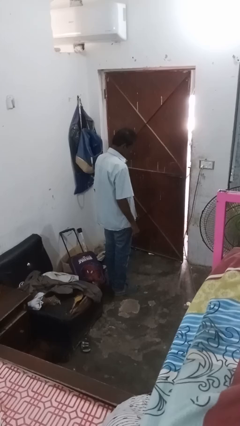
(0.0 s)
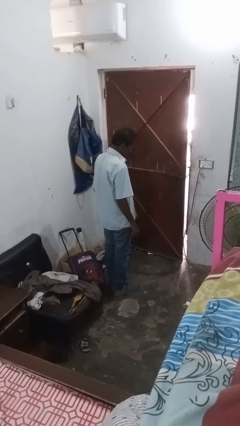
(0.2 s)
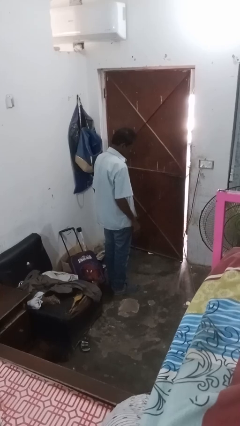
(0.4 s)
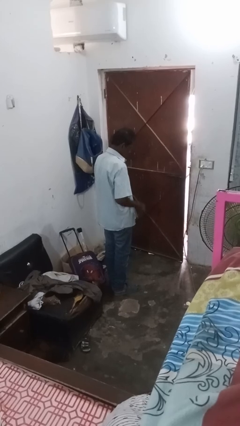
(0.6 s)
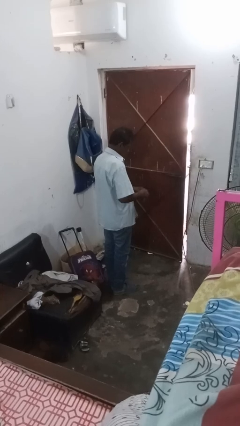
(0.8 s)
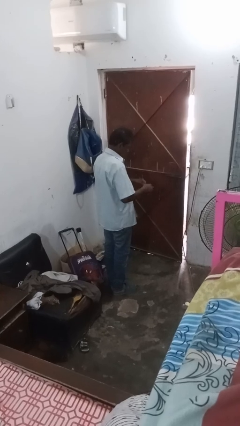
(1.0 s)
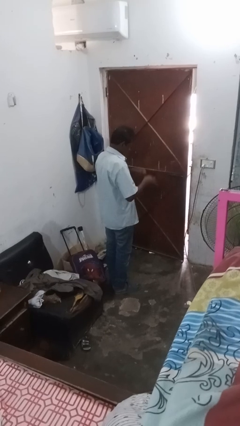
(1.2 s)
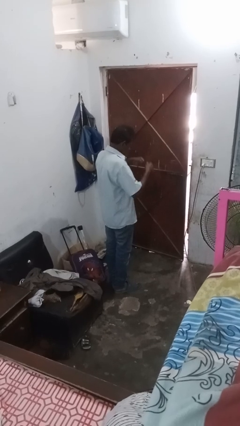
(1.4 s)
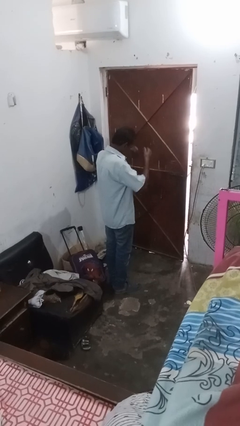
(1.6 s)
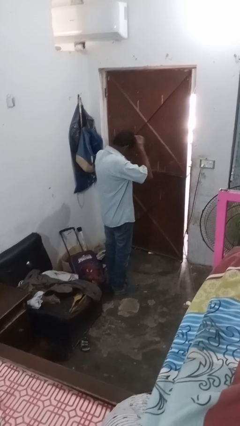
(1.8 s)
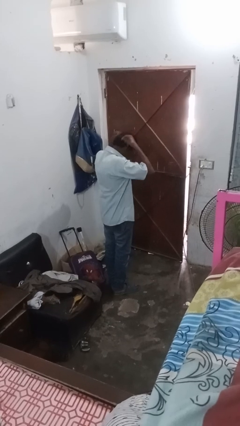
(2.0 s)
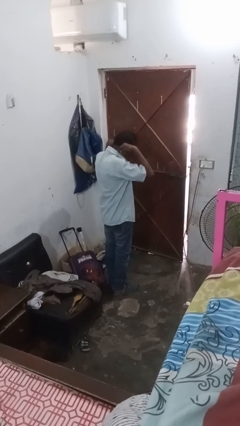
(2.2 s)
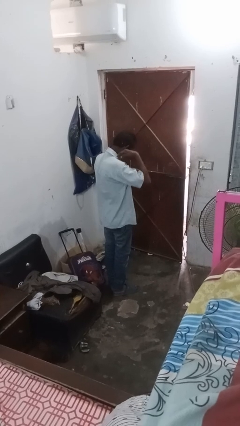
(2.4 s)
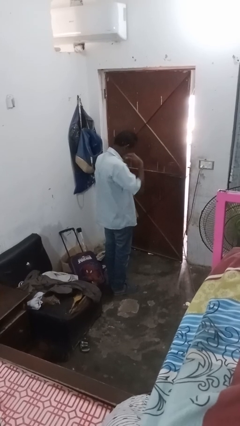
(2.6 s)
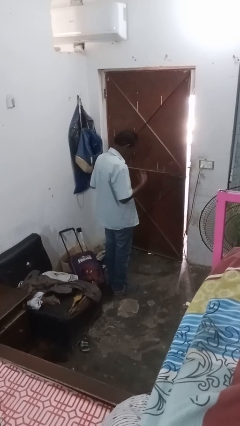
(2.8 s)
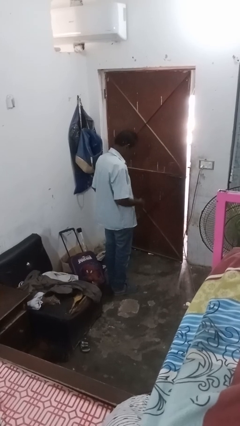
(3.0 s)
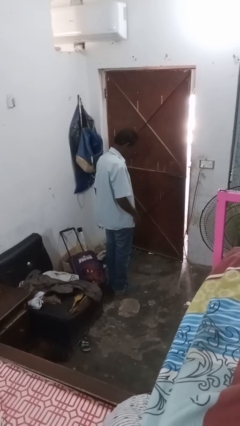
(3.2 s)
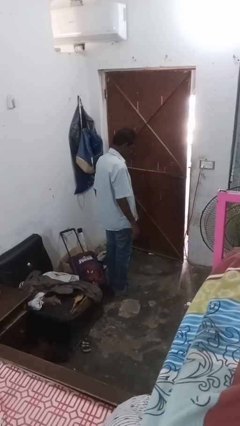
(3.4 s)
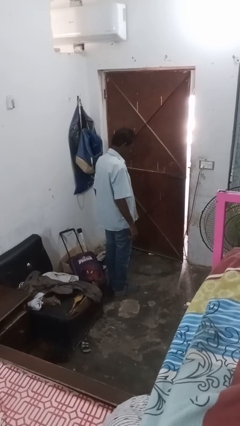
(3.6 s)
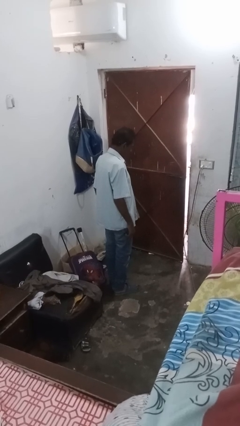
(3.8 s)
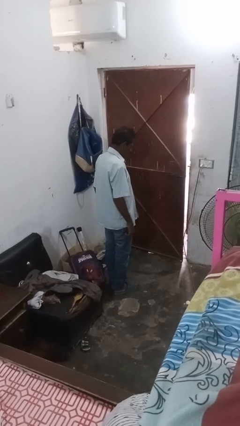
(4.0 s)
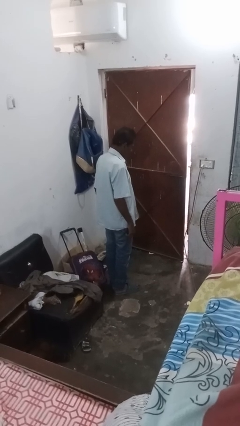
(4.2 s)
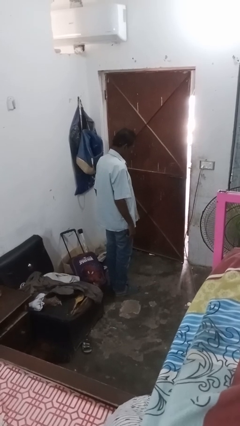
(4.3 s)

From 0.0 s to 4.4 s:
person puts on necklace

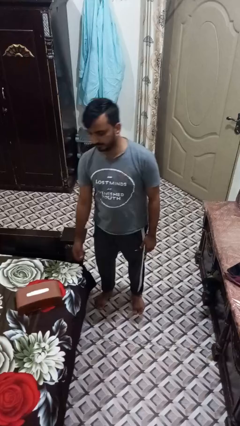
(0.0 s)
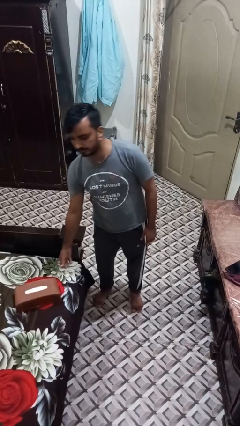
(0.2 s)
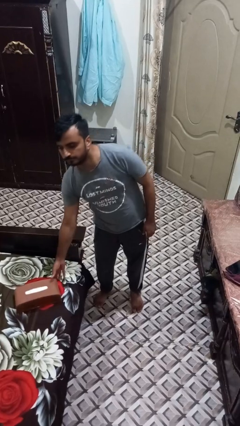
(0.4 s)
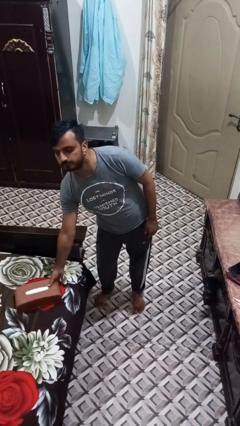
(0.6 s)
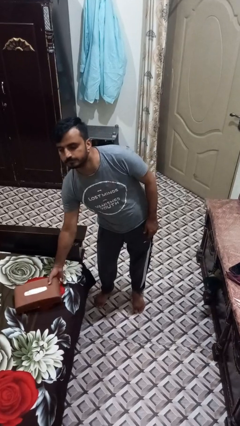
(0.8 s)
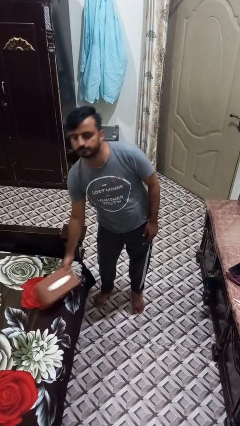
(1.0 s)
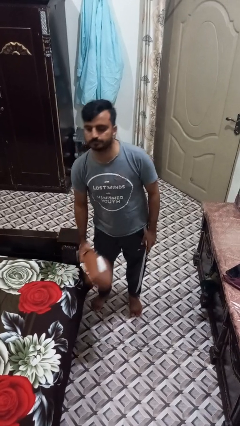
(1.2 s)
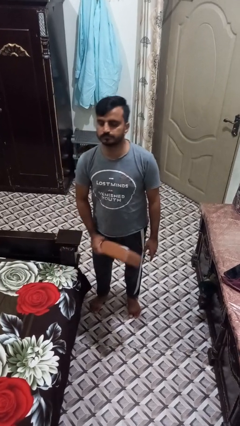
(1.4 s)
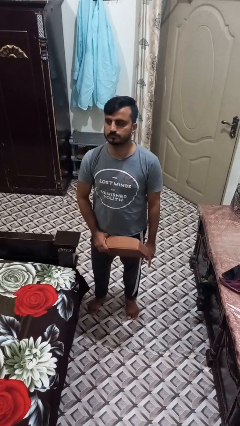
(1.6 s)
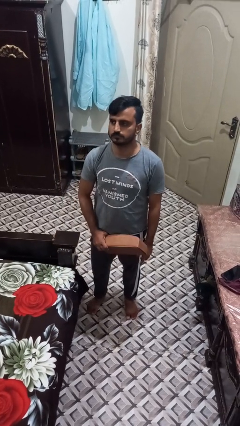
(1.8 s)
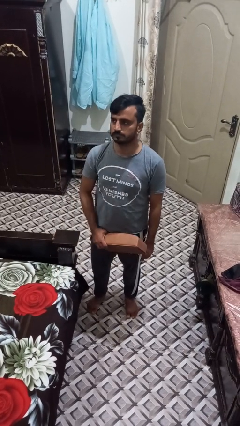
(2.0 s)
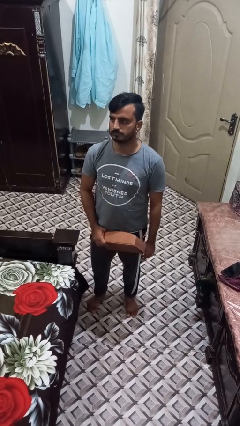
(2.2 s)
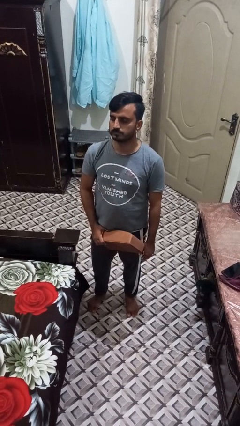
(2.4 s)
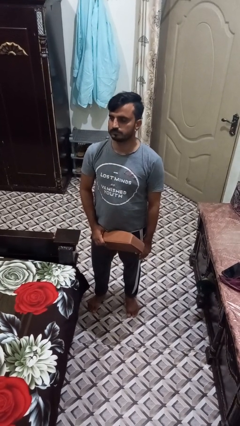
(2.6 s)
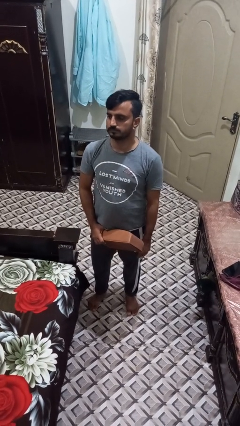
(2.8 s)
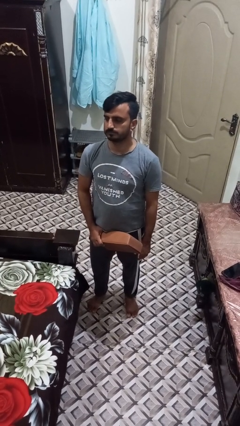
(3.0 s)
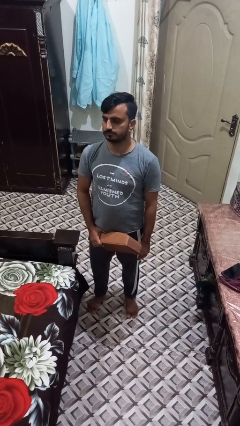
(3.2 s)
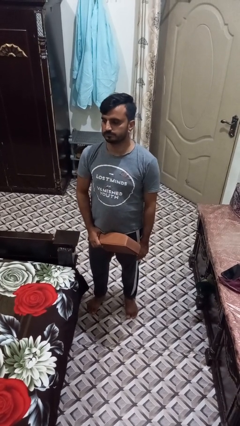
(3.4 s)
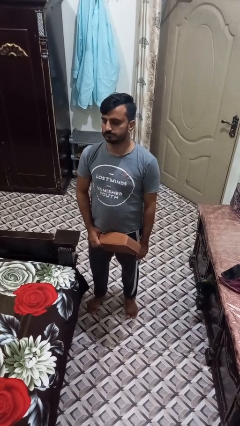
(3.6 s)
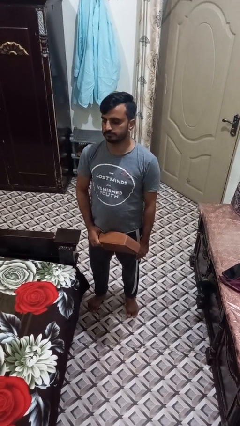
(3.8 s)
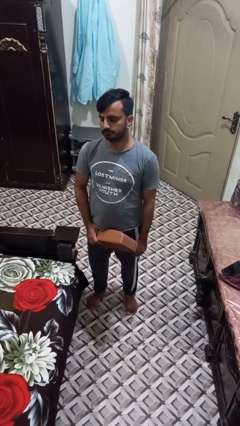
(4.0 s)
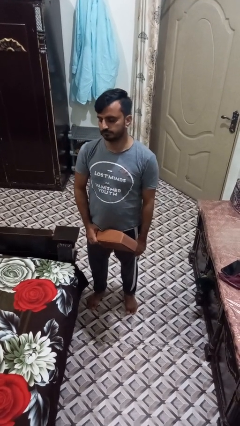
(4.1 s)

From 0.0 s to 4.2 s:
person picks up object from bed

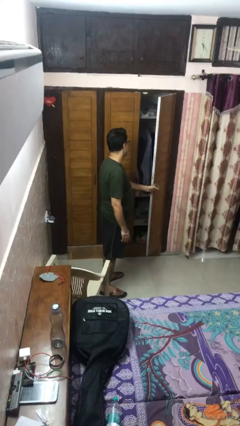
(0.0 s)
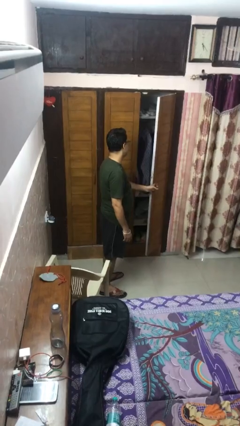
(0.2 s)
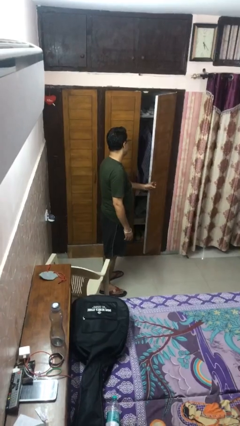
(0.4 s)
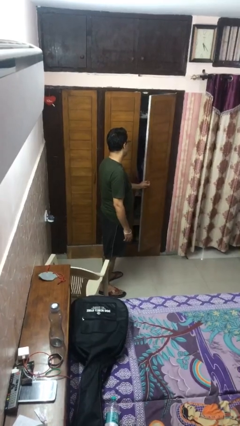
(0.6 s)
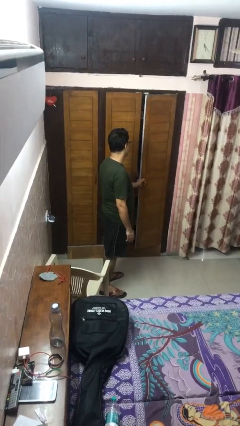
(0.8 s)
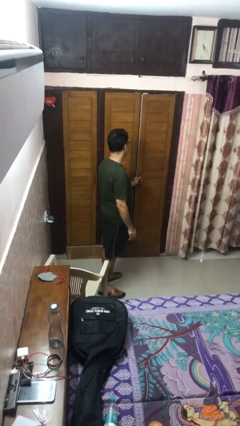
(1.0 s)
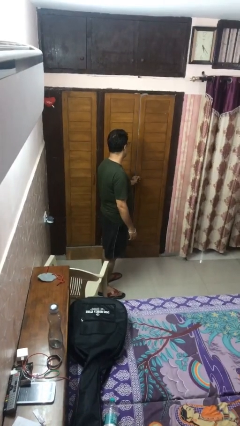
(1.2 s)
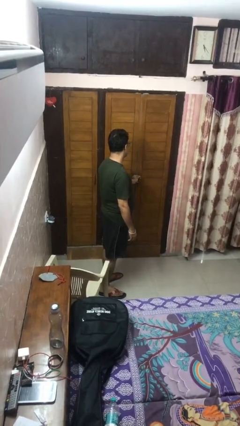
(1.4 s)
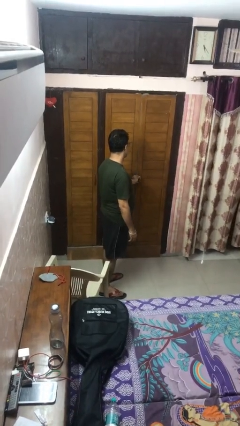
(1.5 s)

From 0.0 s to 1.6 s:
person closes closet door

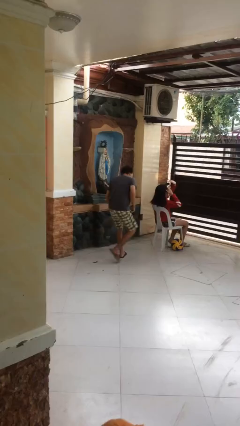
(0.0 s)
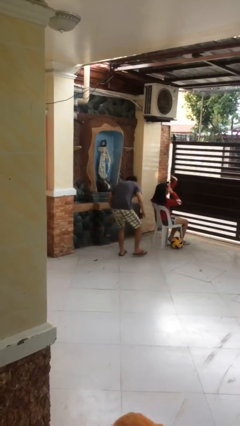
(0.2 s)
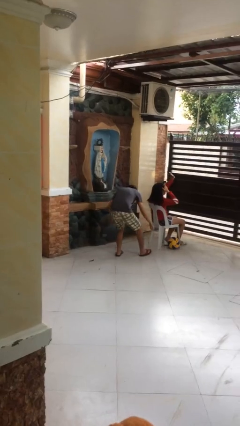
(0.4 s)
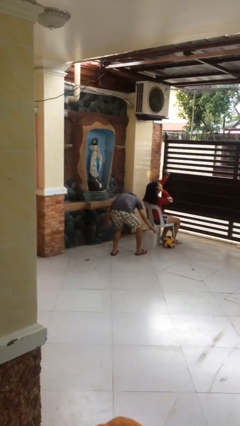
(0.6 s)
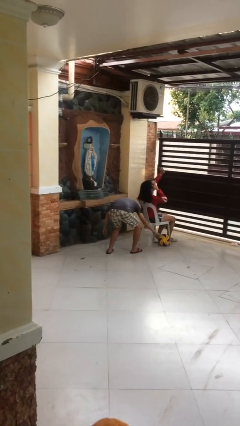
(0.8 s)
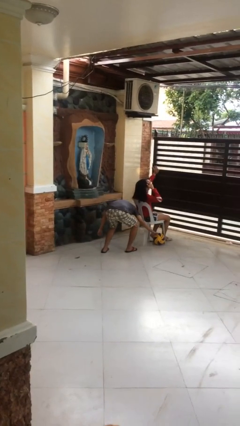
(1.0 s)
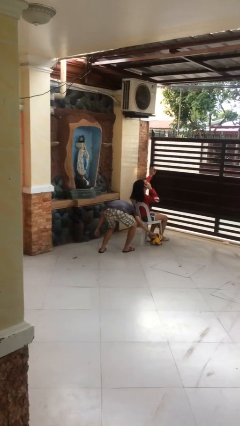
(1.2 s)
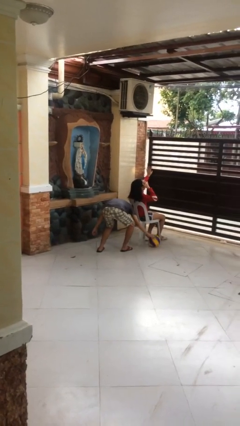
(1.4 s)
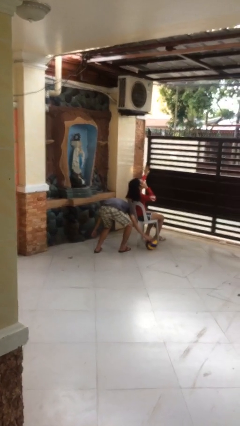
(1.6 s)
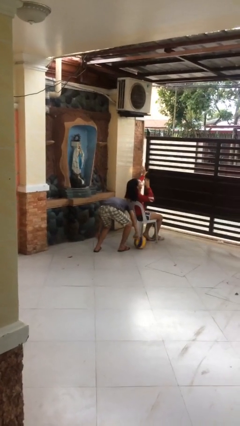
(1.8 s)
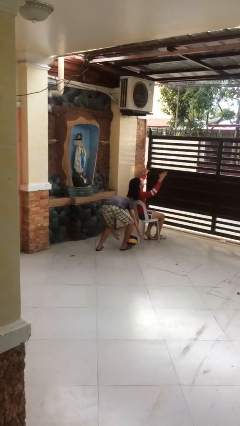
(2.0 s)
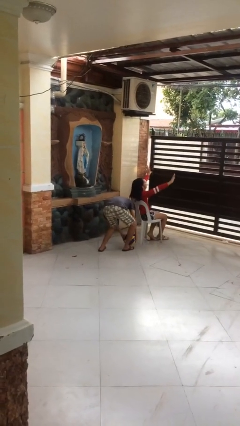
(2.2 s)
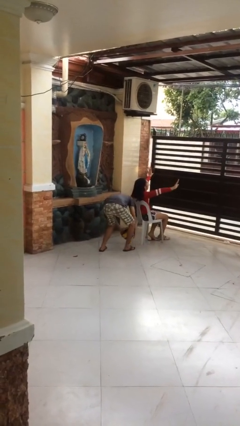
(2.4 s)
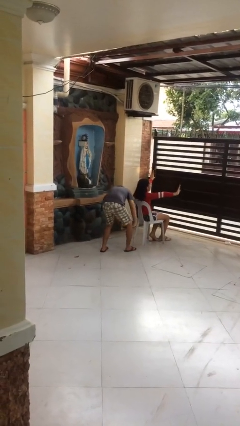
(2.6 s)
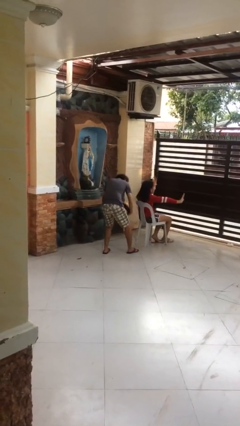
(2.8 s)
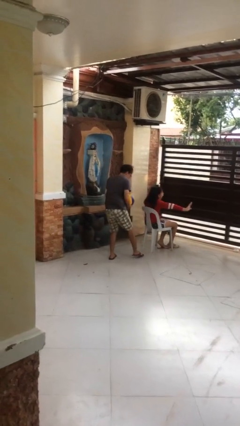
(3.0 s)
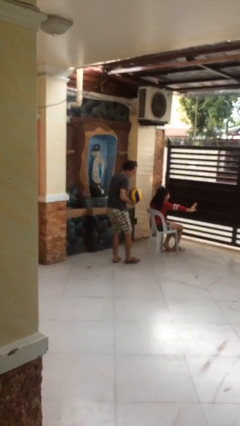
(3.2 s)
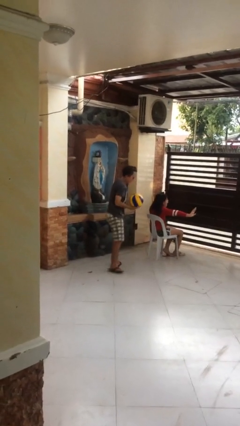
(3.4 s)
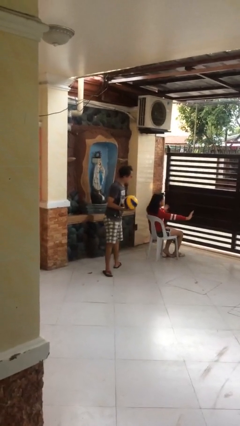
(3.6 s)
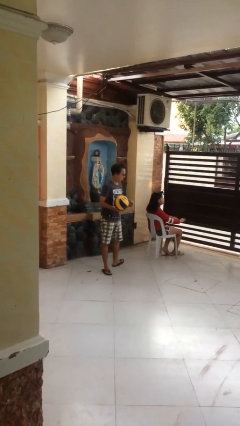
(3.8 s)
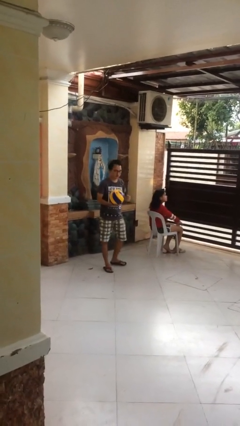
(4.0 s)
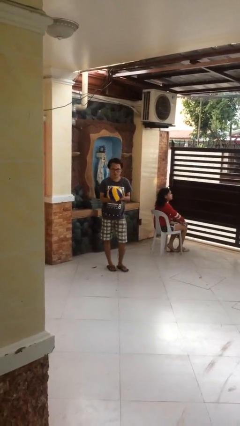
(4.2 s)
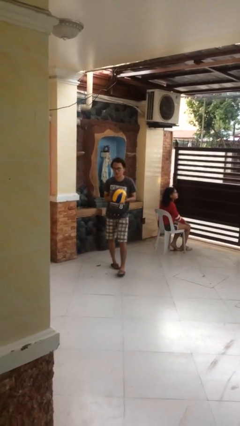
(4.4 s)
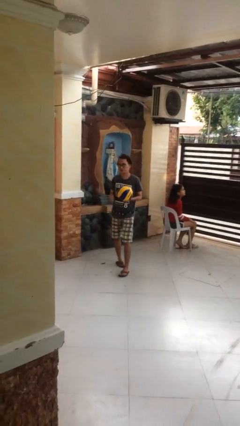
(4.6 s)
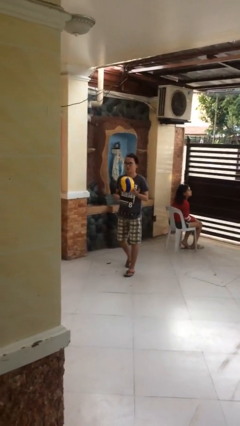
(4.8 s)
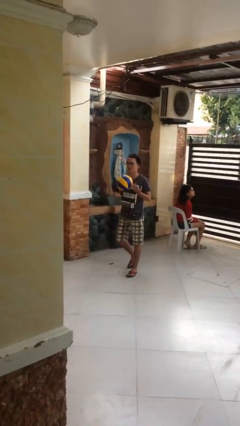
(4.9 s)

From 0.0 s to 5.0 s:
person steals object from person

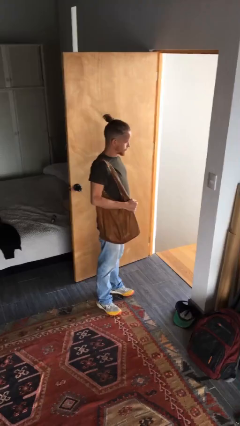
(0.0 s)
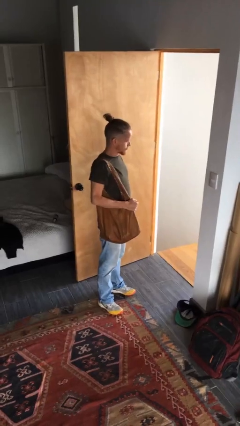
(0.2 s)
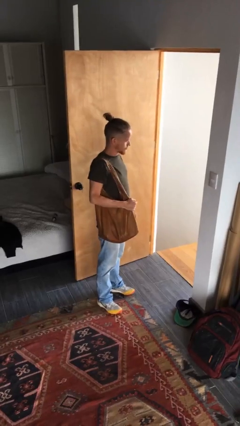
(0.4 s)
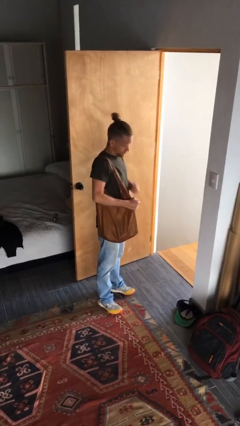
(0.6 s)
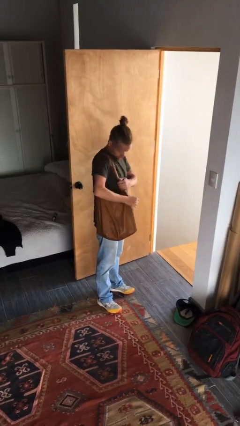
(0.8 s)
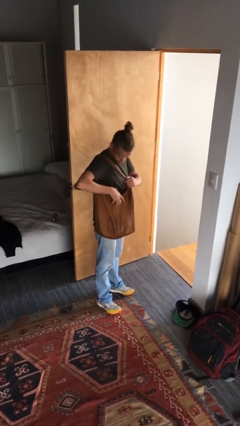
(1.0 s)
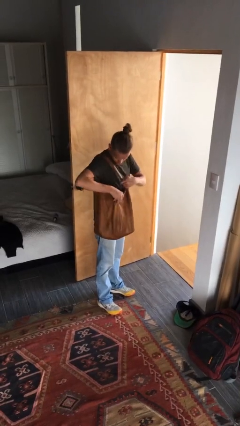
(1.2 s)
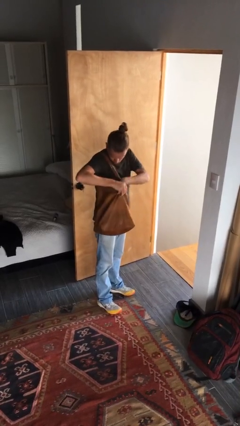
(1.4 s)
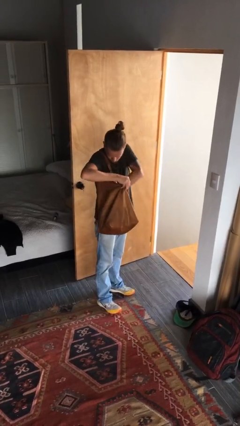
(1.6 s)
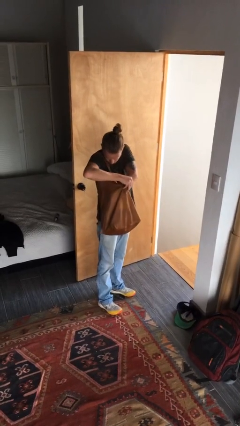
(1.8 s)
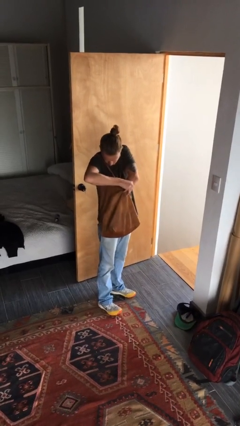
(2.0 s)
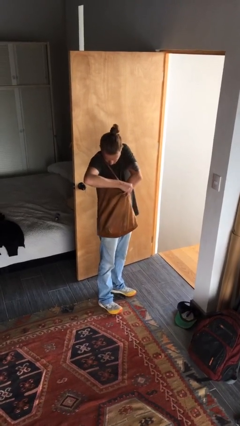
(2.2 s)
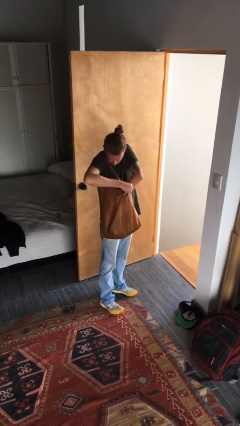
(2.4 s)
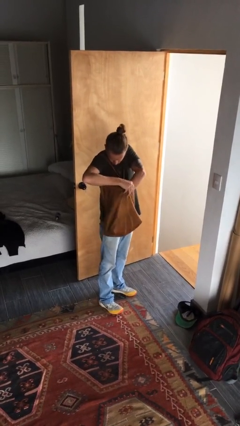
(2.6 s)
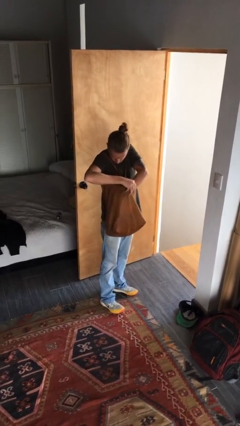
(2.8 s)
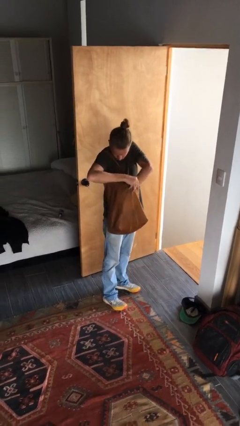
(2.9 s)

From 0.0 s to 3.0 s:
person searches in purse
